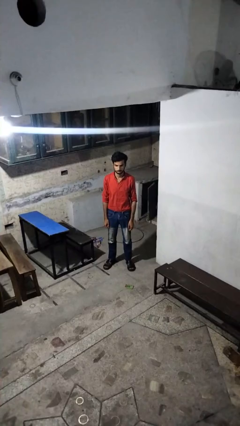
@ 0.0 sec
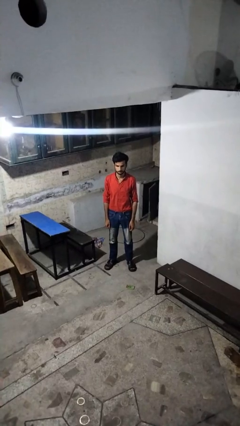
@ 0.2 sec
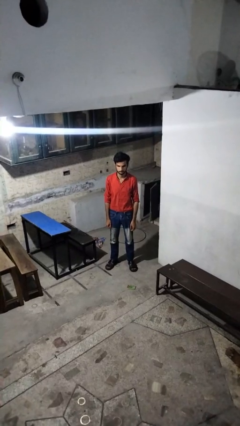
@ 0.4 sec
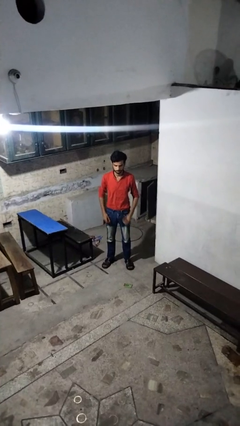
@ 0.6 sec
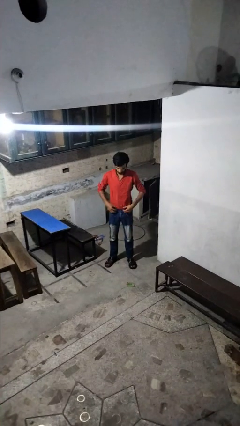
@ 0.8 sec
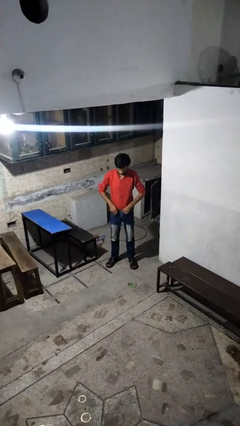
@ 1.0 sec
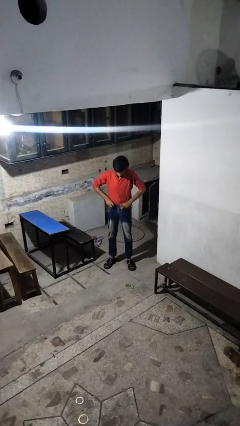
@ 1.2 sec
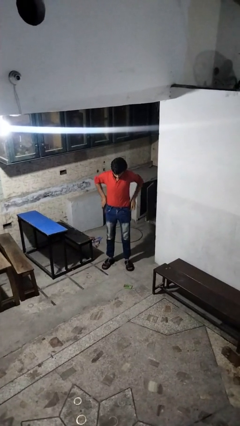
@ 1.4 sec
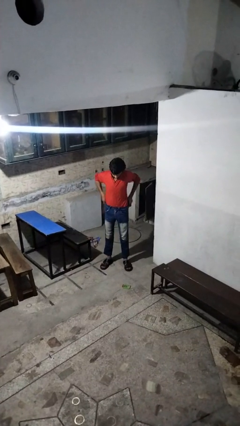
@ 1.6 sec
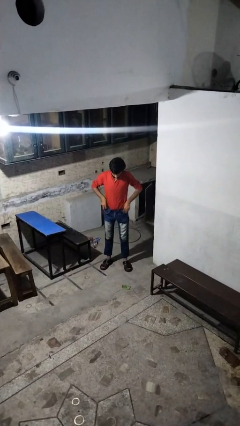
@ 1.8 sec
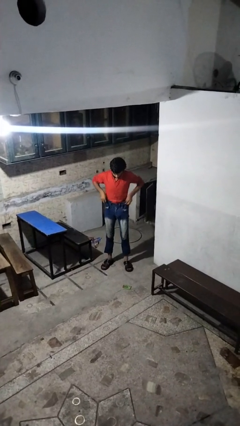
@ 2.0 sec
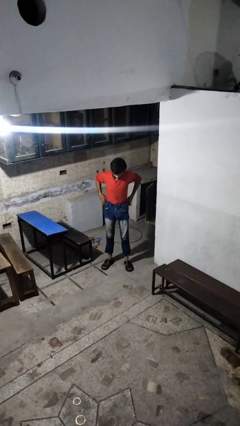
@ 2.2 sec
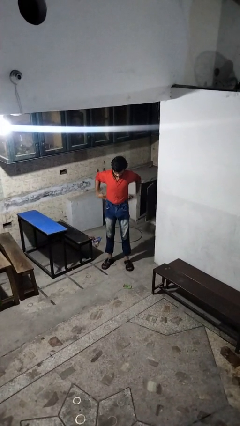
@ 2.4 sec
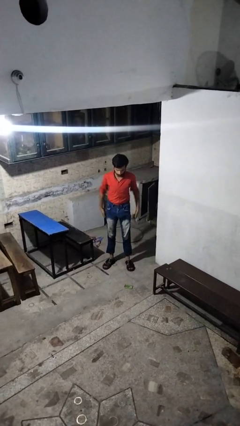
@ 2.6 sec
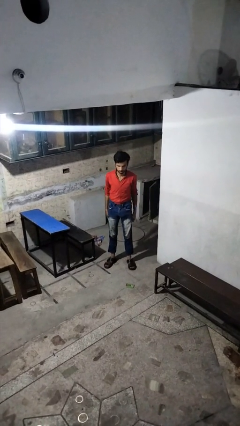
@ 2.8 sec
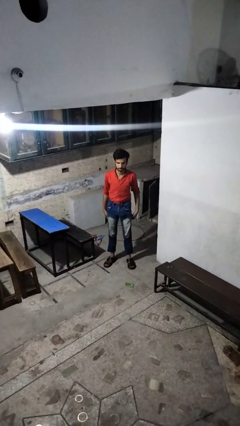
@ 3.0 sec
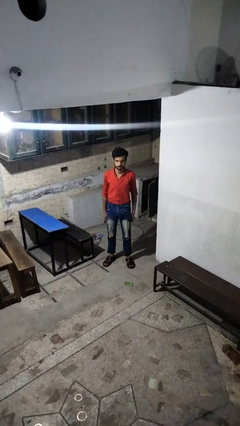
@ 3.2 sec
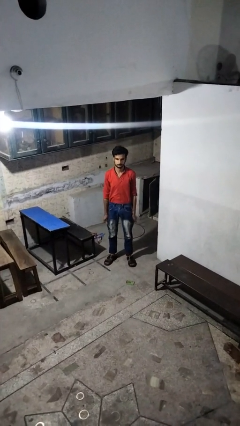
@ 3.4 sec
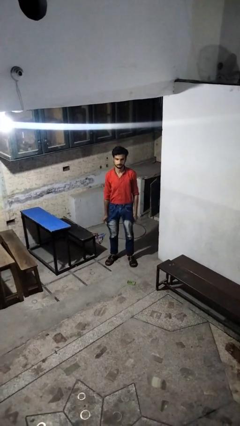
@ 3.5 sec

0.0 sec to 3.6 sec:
person hikes up pants

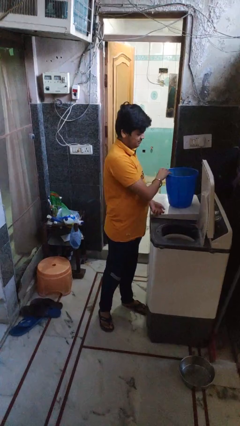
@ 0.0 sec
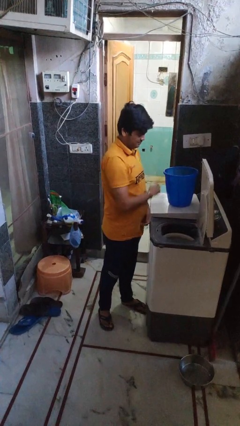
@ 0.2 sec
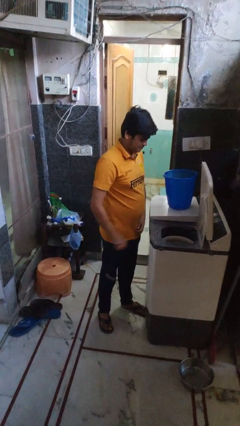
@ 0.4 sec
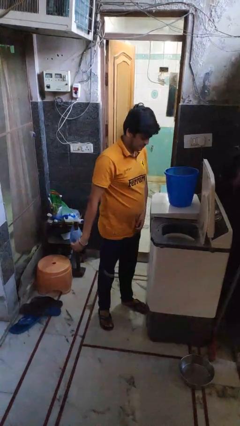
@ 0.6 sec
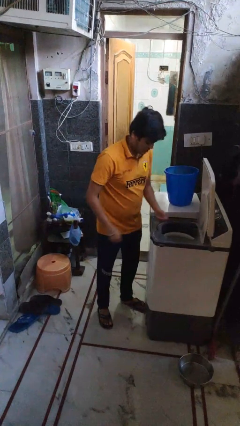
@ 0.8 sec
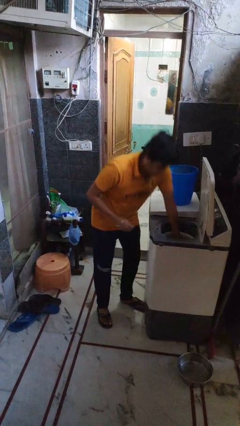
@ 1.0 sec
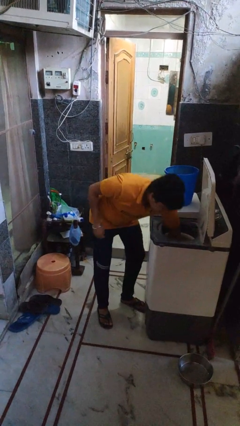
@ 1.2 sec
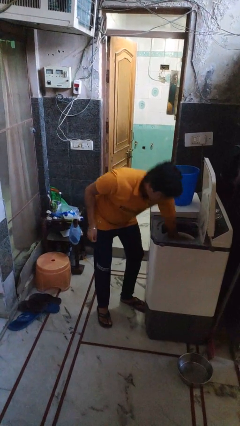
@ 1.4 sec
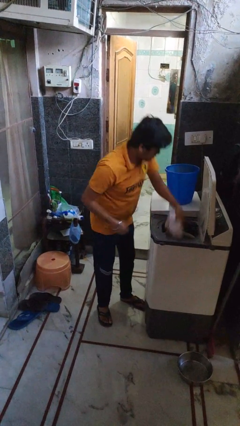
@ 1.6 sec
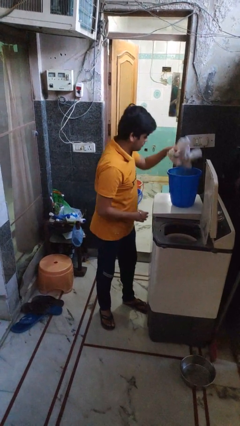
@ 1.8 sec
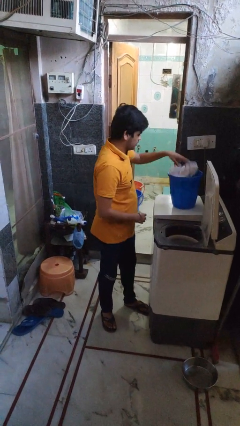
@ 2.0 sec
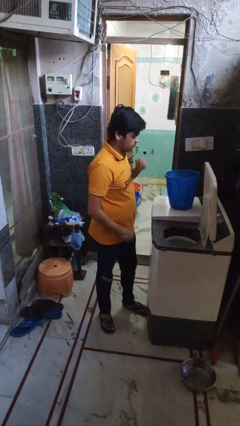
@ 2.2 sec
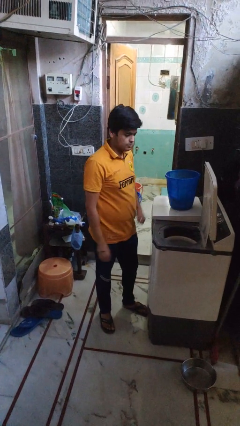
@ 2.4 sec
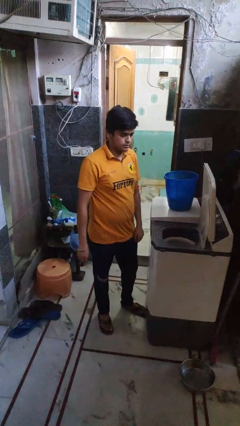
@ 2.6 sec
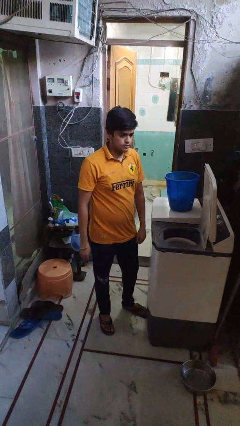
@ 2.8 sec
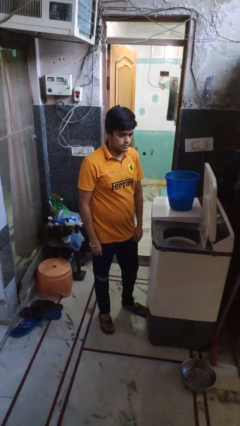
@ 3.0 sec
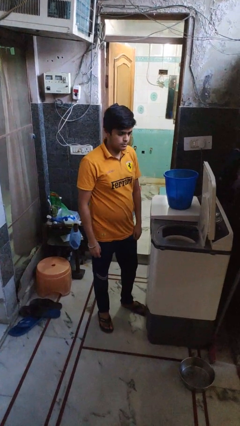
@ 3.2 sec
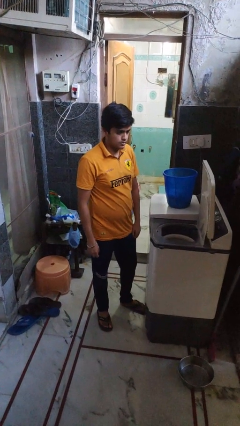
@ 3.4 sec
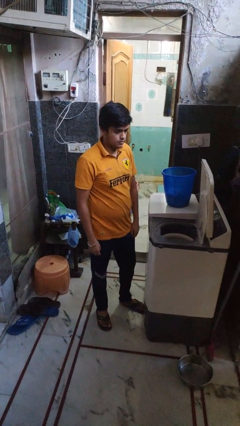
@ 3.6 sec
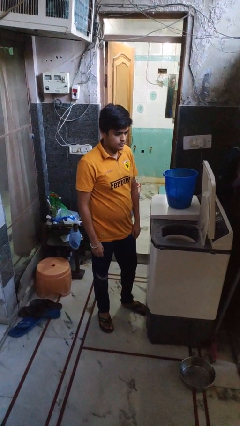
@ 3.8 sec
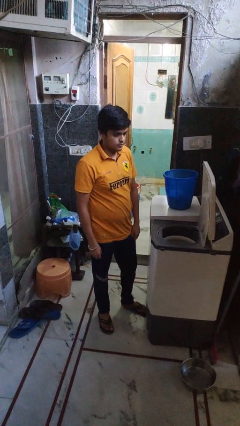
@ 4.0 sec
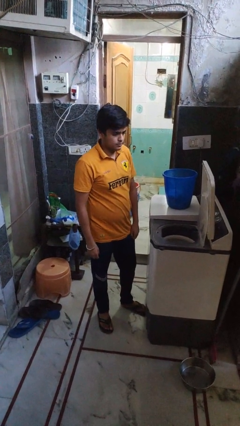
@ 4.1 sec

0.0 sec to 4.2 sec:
person unloads clotheswasher

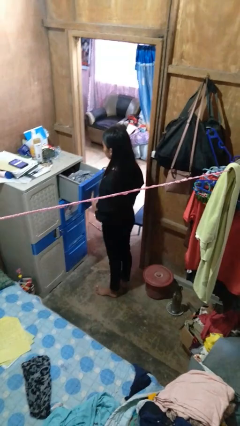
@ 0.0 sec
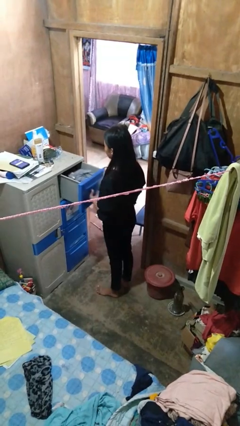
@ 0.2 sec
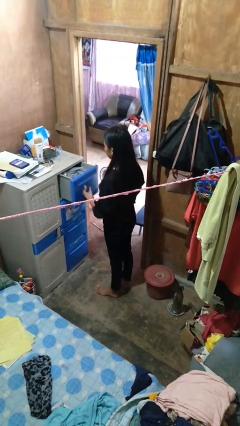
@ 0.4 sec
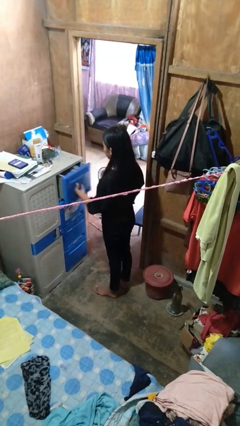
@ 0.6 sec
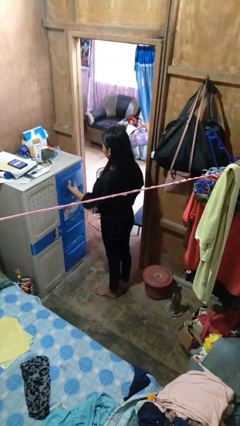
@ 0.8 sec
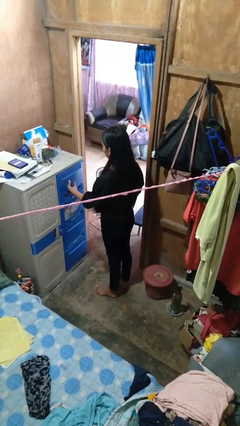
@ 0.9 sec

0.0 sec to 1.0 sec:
person closes dresser drawer

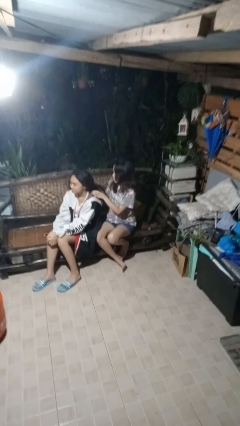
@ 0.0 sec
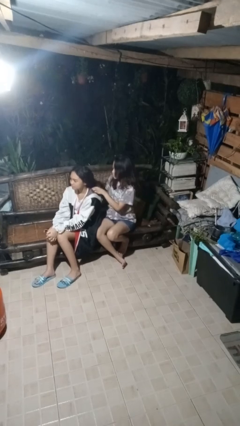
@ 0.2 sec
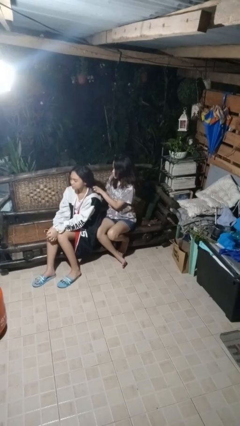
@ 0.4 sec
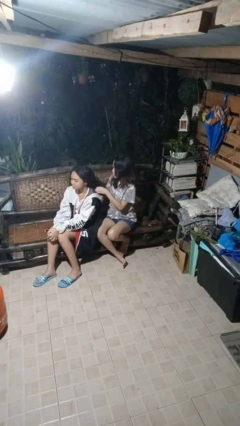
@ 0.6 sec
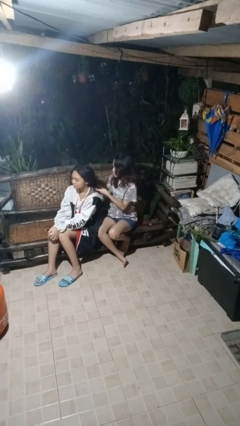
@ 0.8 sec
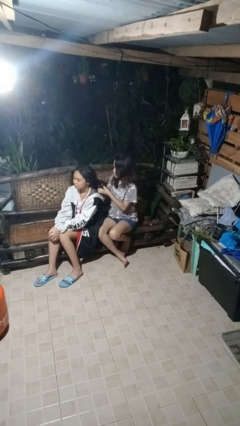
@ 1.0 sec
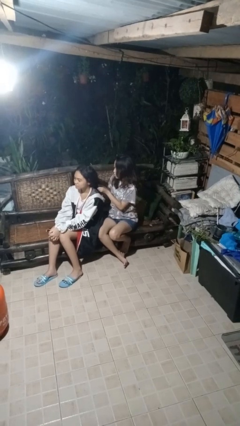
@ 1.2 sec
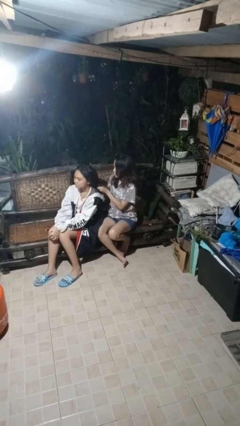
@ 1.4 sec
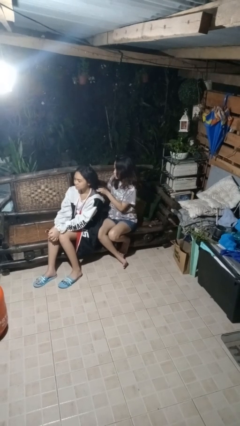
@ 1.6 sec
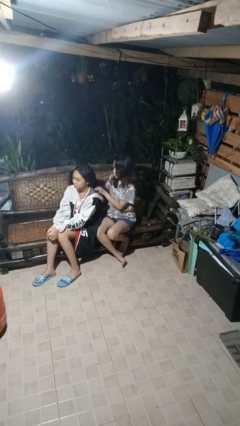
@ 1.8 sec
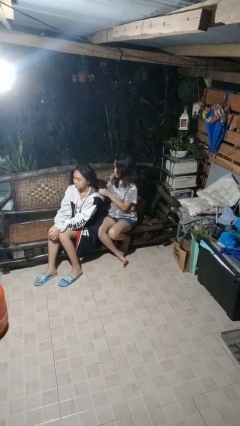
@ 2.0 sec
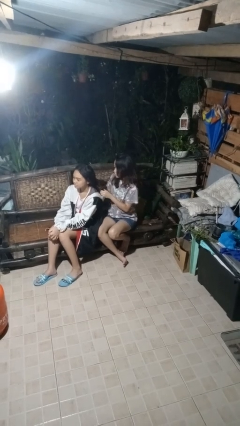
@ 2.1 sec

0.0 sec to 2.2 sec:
person braids hair of person

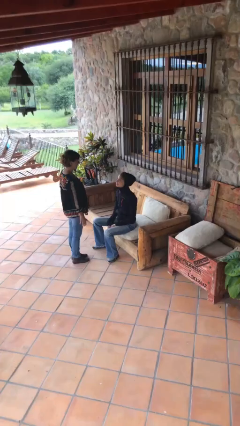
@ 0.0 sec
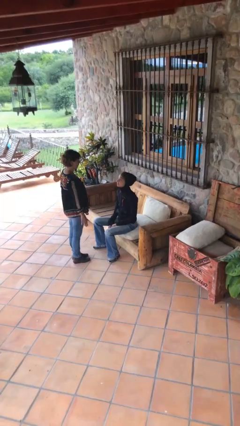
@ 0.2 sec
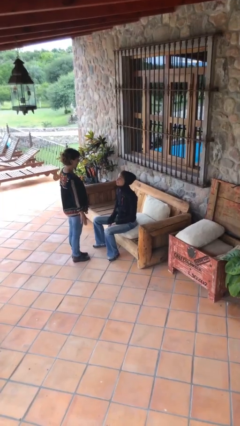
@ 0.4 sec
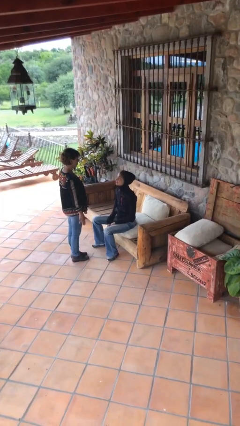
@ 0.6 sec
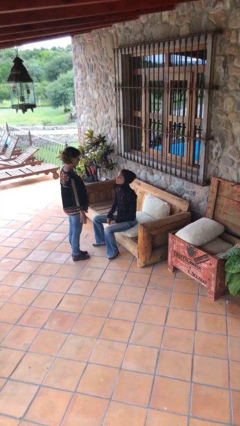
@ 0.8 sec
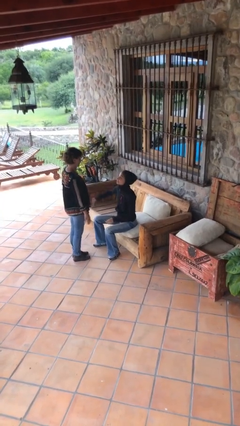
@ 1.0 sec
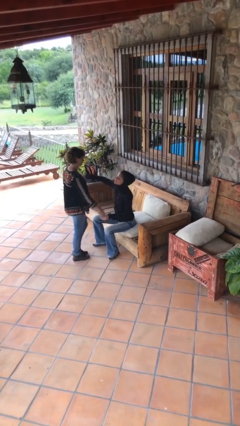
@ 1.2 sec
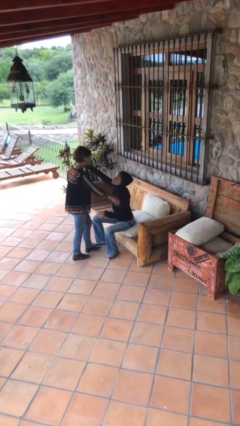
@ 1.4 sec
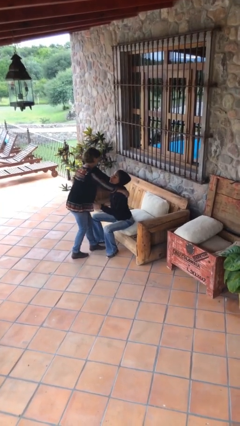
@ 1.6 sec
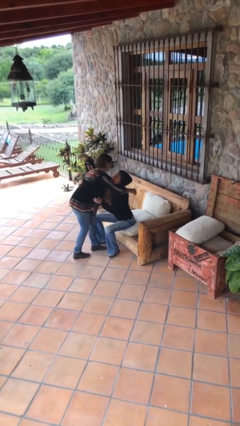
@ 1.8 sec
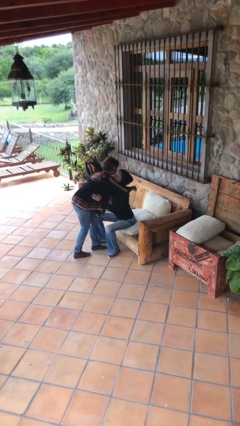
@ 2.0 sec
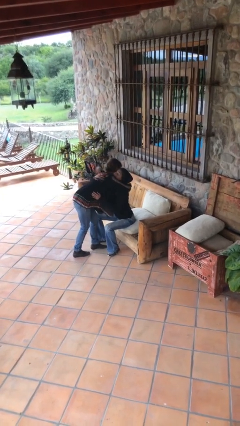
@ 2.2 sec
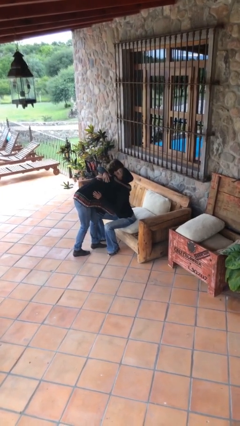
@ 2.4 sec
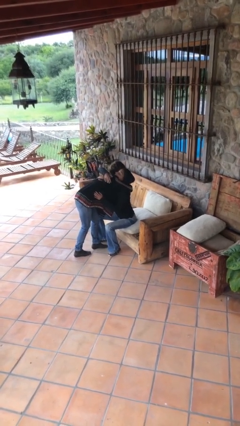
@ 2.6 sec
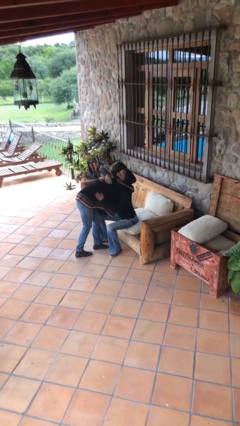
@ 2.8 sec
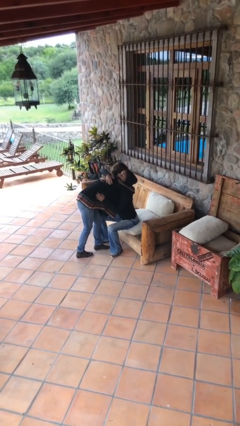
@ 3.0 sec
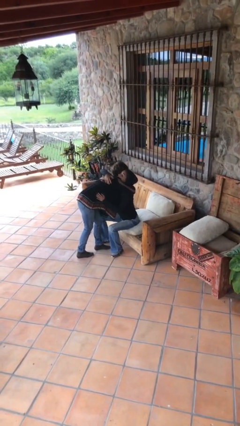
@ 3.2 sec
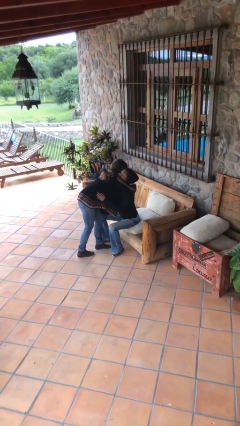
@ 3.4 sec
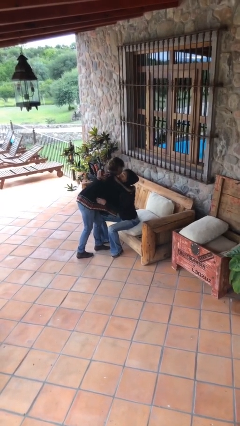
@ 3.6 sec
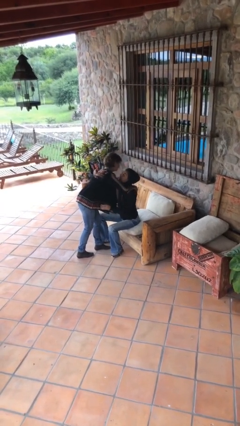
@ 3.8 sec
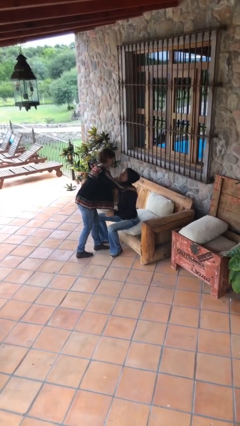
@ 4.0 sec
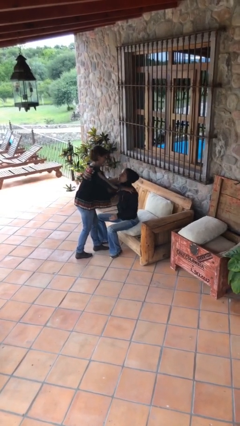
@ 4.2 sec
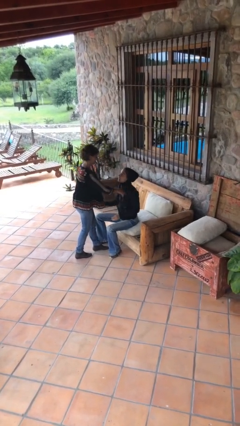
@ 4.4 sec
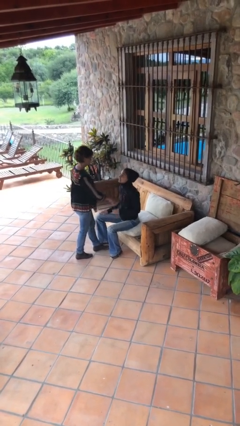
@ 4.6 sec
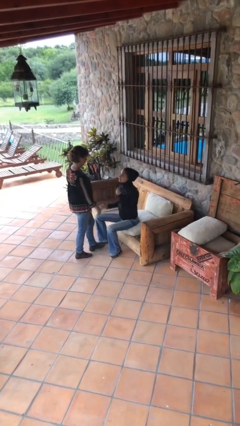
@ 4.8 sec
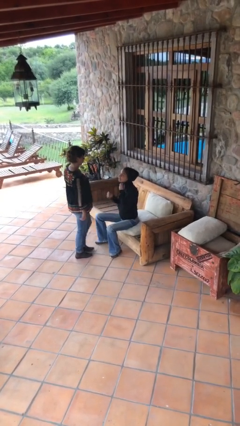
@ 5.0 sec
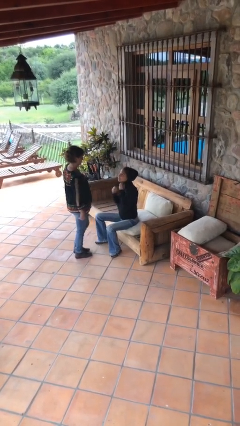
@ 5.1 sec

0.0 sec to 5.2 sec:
person embraces person

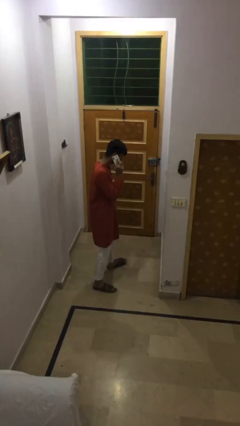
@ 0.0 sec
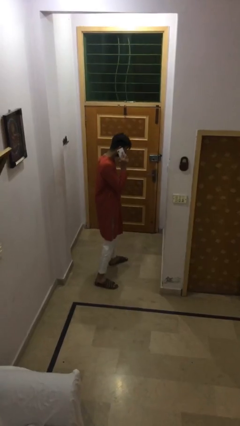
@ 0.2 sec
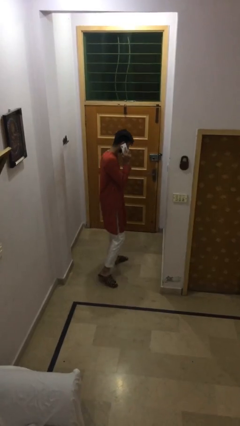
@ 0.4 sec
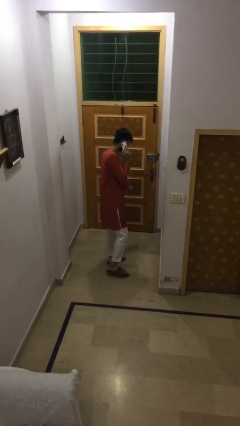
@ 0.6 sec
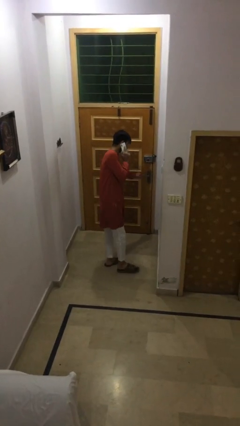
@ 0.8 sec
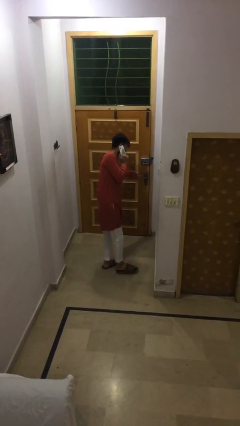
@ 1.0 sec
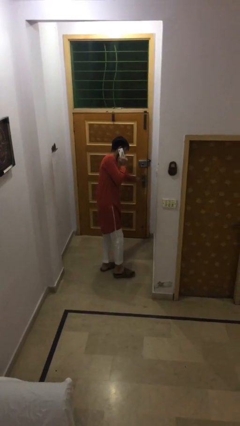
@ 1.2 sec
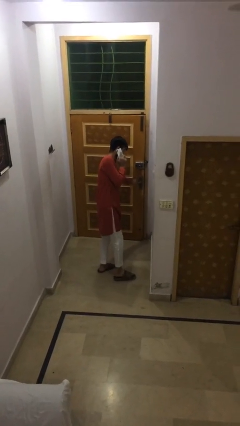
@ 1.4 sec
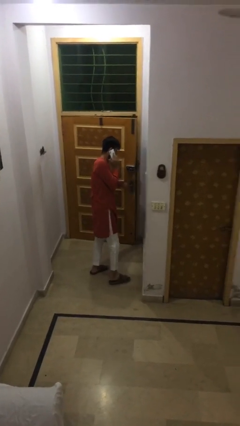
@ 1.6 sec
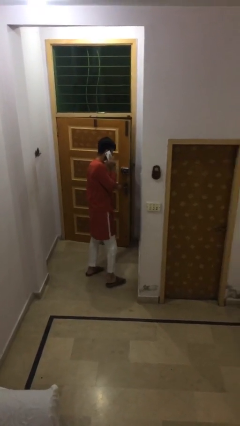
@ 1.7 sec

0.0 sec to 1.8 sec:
person opens facility door
